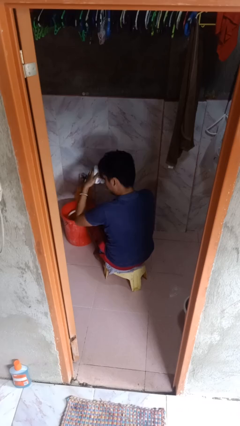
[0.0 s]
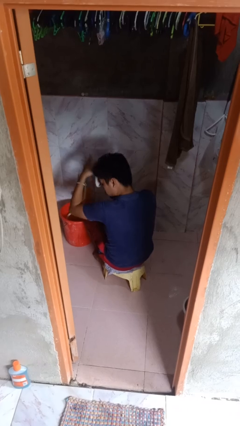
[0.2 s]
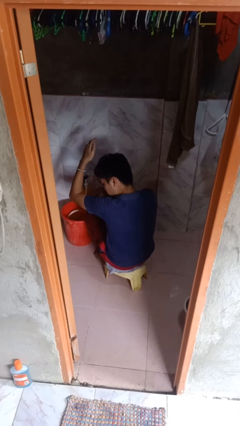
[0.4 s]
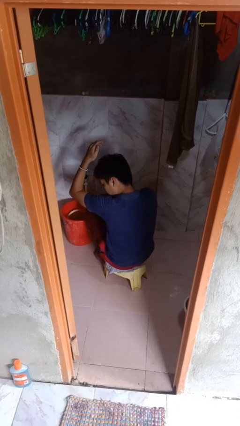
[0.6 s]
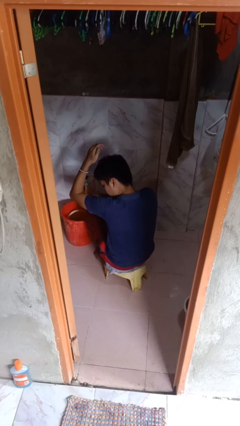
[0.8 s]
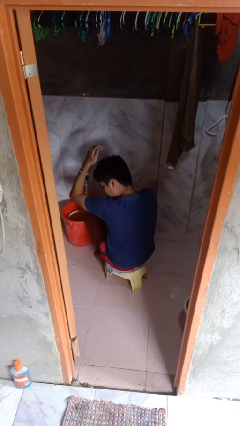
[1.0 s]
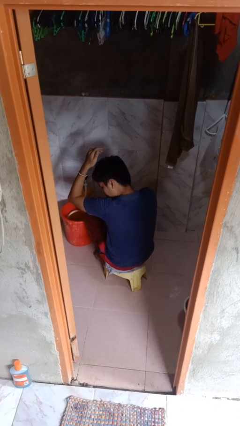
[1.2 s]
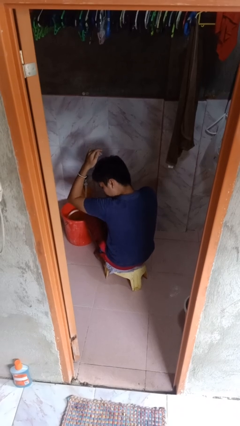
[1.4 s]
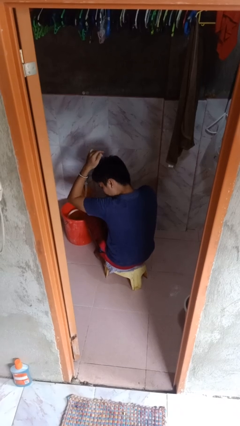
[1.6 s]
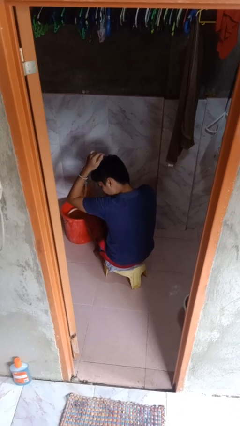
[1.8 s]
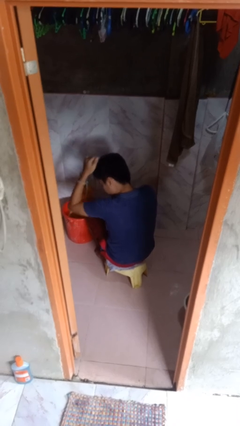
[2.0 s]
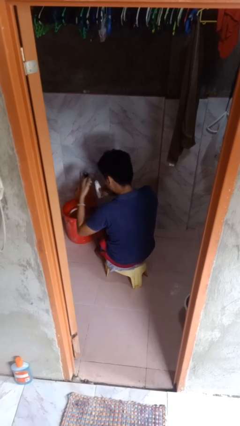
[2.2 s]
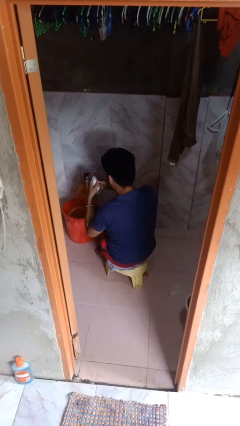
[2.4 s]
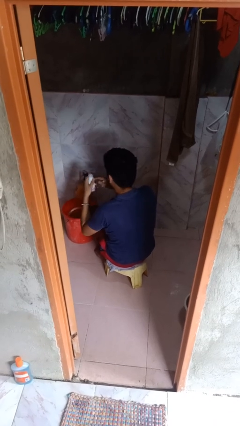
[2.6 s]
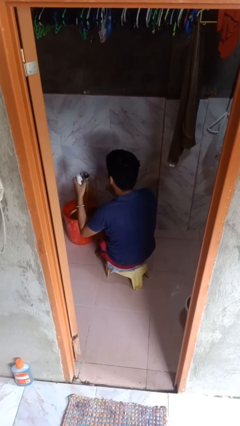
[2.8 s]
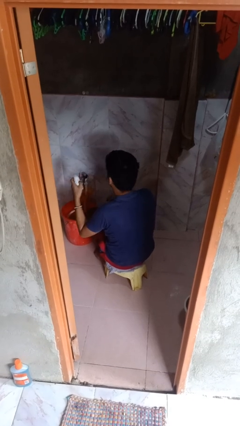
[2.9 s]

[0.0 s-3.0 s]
person applies deodorant

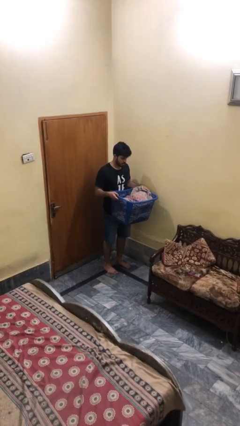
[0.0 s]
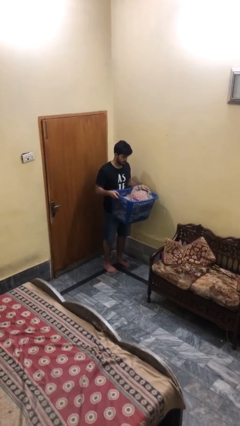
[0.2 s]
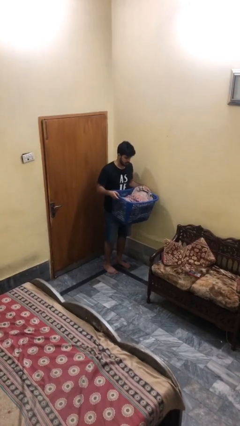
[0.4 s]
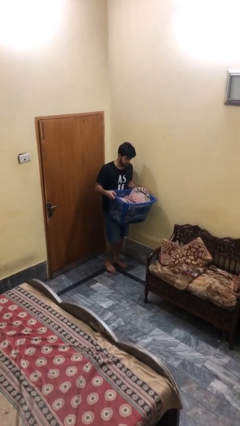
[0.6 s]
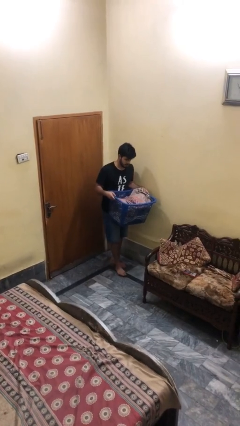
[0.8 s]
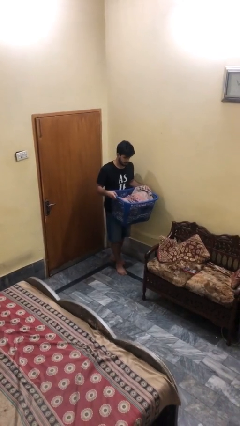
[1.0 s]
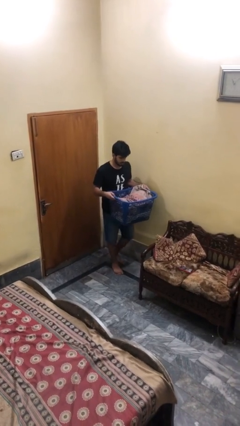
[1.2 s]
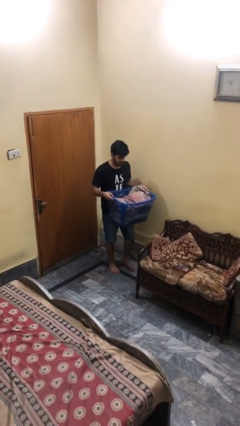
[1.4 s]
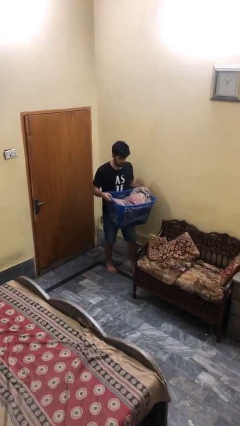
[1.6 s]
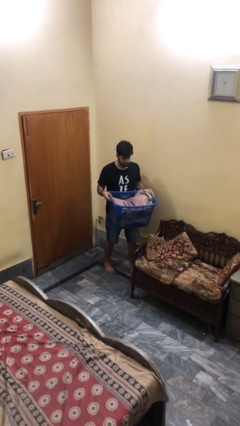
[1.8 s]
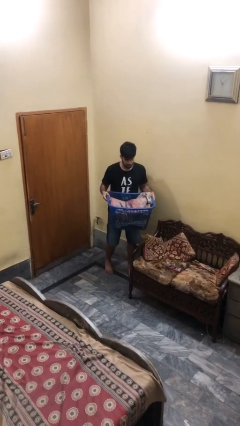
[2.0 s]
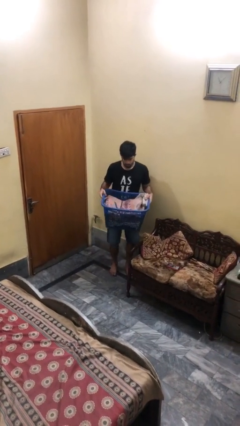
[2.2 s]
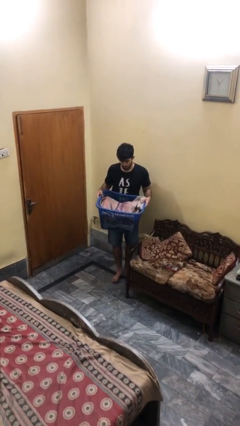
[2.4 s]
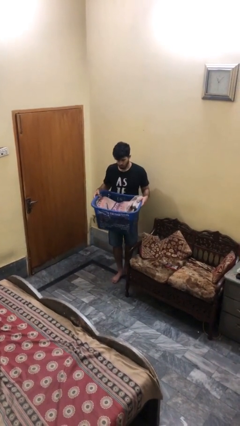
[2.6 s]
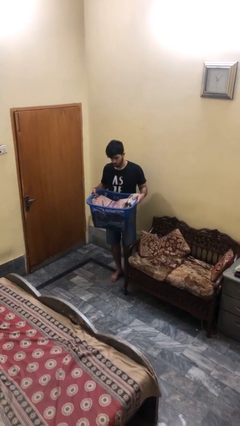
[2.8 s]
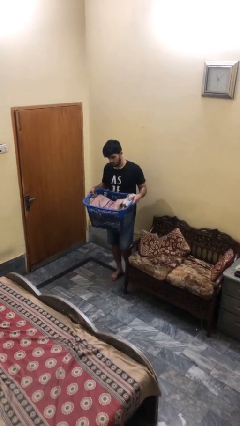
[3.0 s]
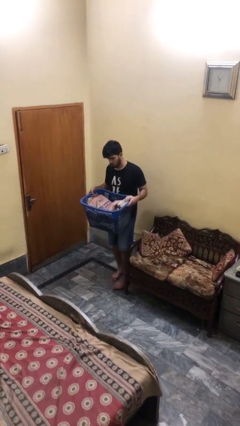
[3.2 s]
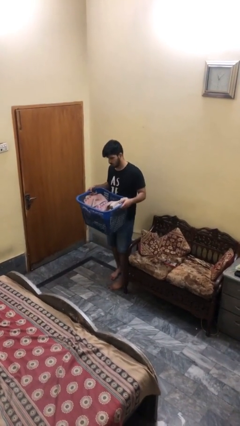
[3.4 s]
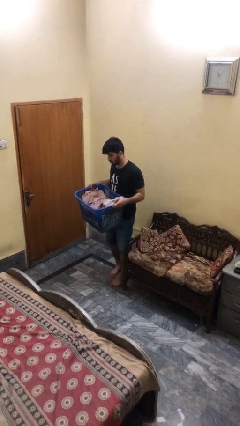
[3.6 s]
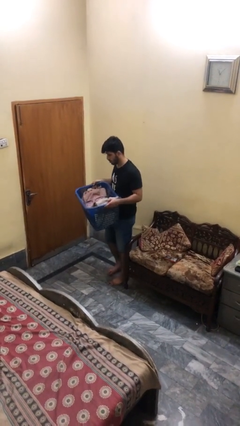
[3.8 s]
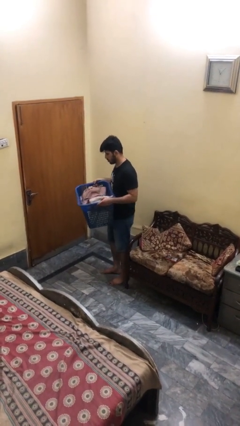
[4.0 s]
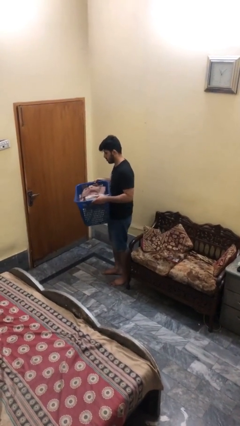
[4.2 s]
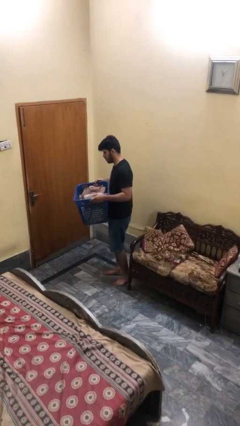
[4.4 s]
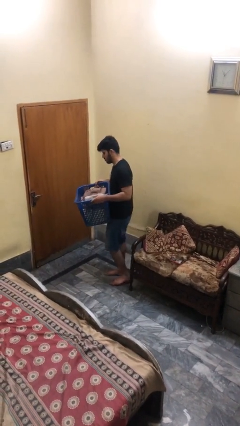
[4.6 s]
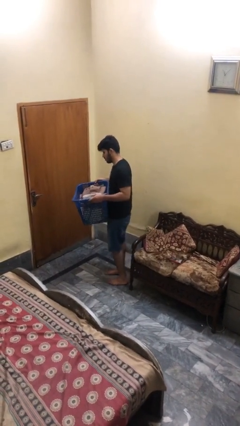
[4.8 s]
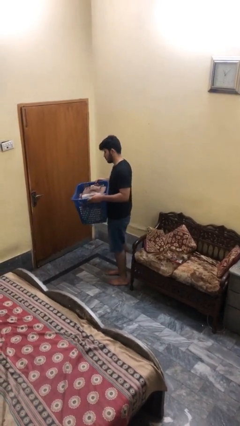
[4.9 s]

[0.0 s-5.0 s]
person carries laundry basket

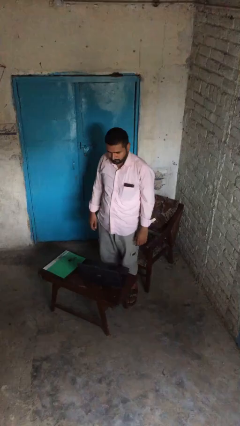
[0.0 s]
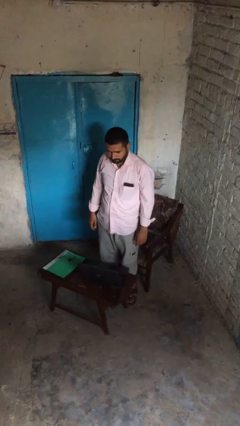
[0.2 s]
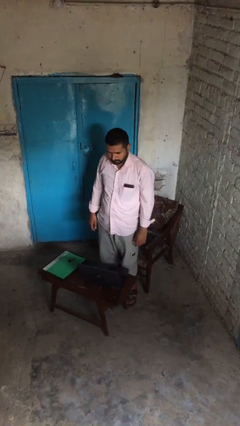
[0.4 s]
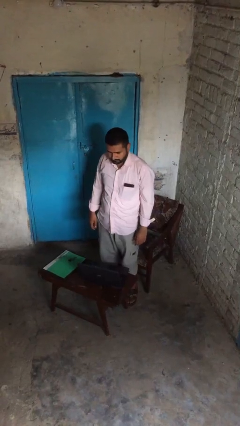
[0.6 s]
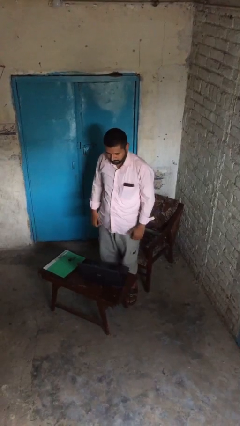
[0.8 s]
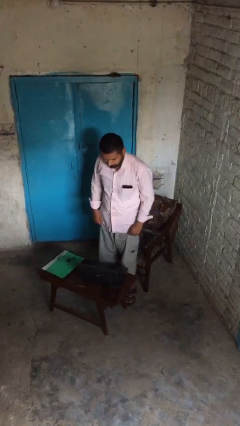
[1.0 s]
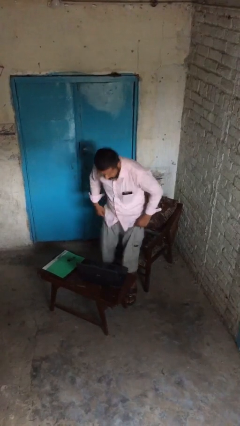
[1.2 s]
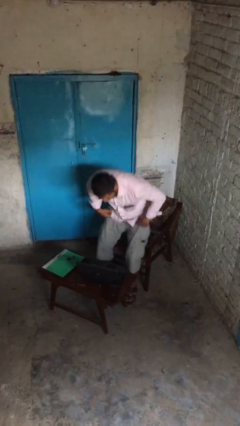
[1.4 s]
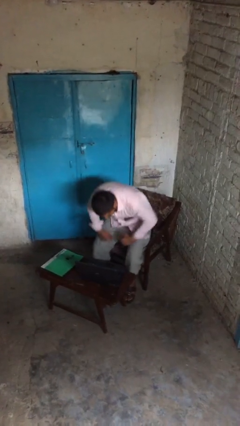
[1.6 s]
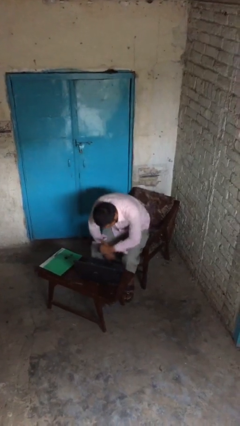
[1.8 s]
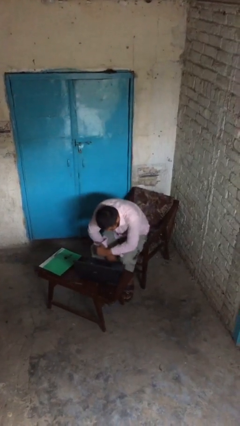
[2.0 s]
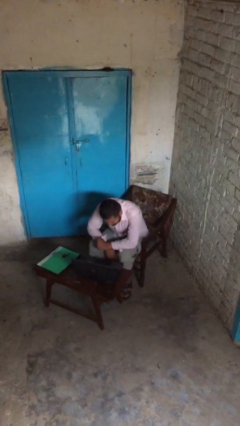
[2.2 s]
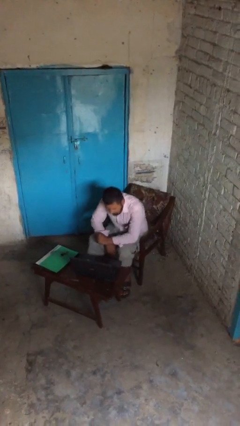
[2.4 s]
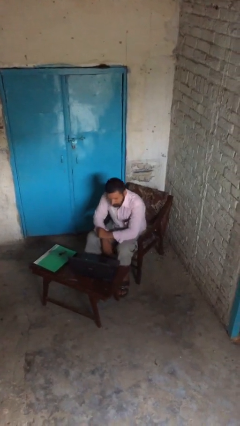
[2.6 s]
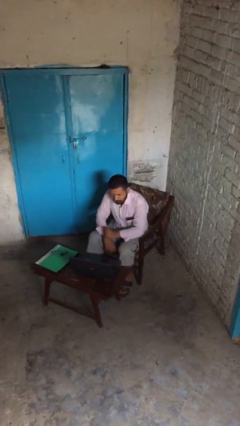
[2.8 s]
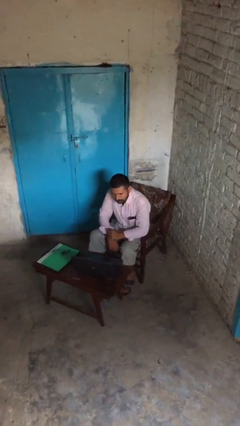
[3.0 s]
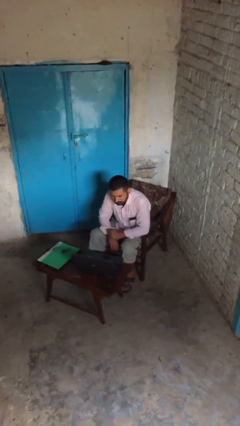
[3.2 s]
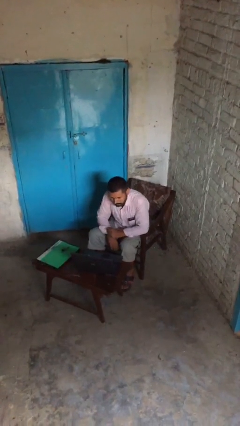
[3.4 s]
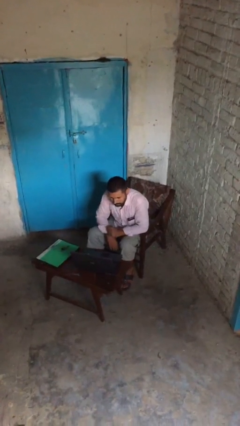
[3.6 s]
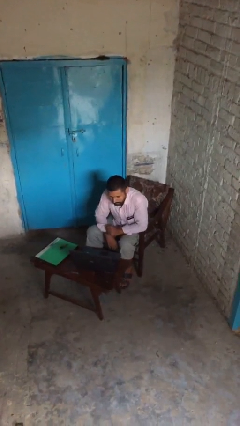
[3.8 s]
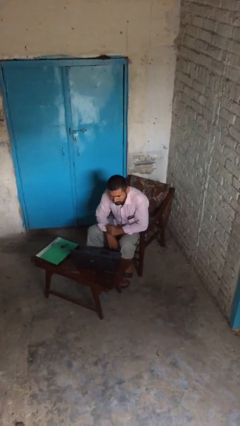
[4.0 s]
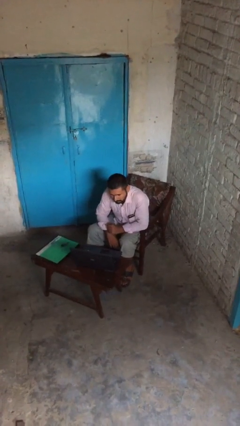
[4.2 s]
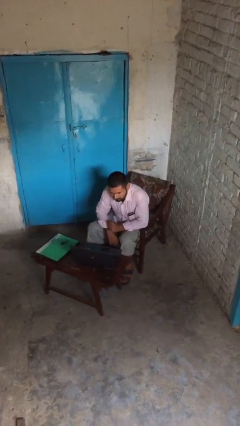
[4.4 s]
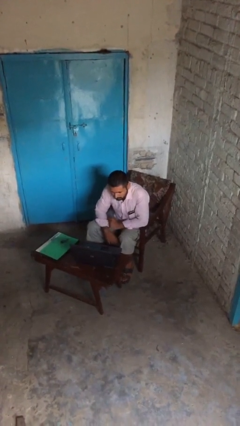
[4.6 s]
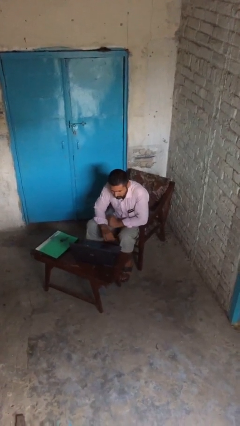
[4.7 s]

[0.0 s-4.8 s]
person sits down

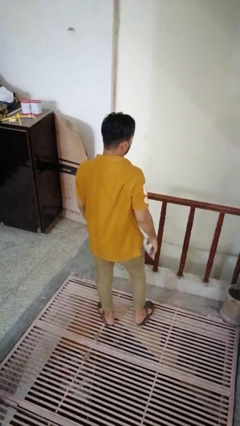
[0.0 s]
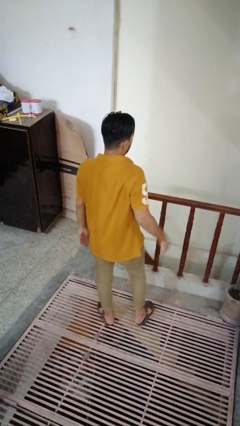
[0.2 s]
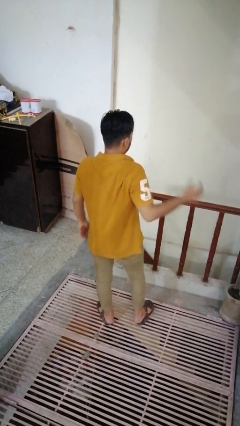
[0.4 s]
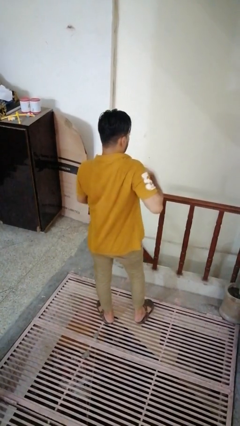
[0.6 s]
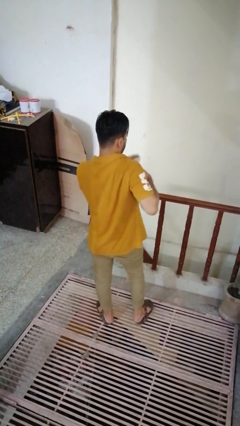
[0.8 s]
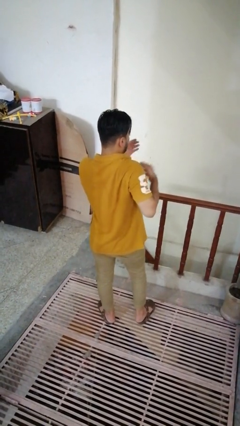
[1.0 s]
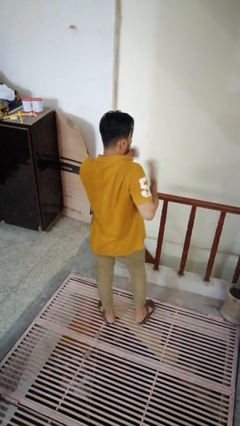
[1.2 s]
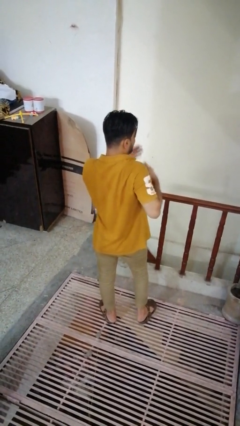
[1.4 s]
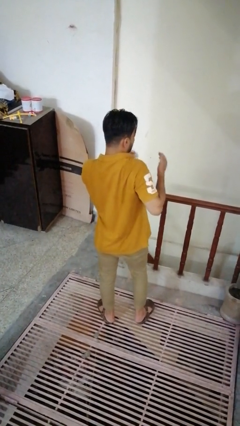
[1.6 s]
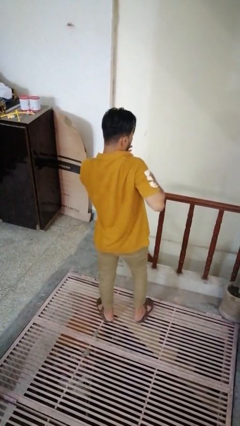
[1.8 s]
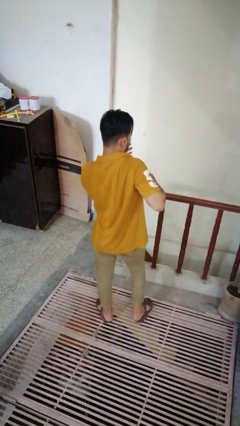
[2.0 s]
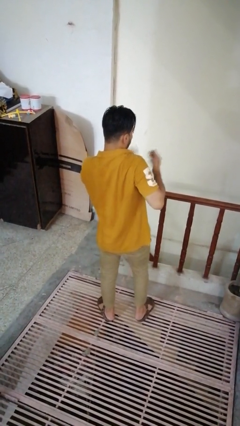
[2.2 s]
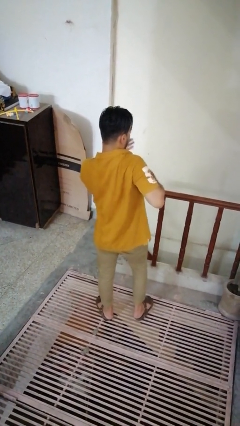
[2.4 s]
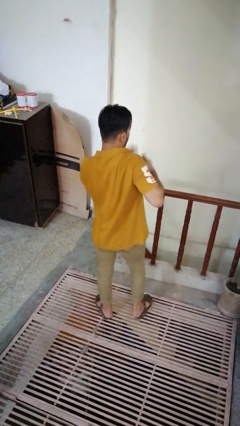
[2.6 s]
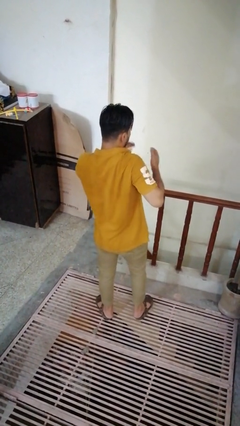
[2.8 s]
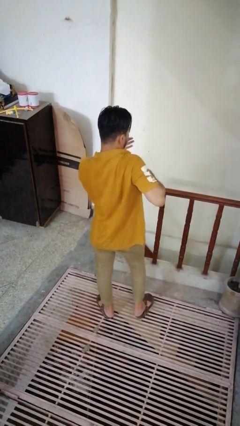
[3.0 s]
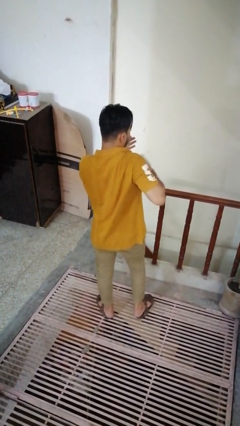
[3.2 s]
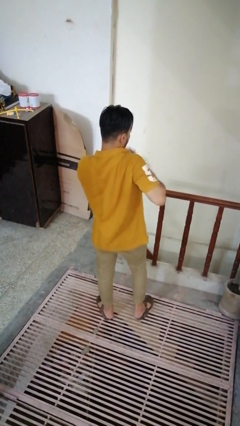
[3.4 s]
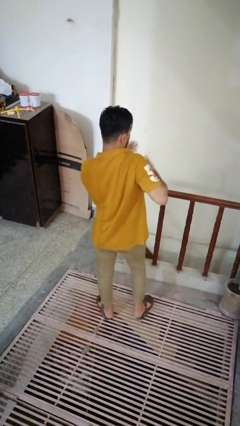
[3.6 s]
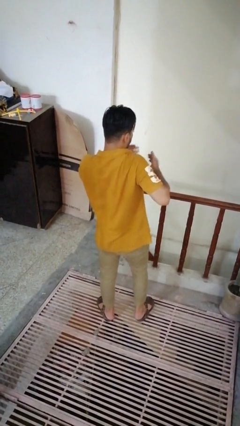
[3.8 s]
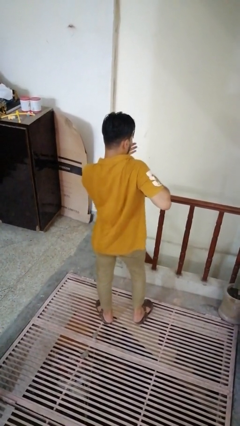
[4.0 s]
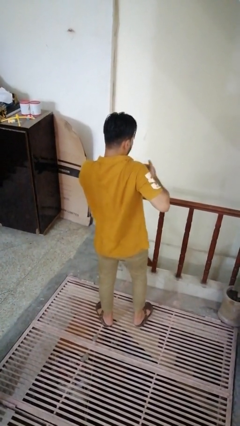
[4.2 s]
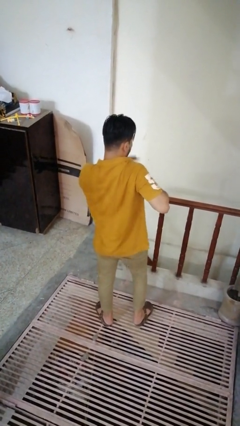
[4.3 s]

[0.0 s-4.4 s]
person drums on chest

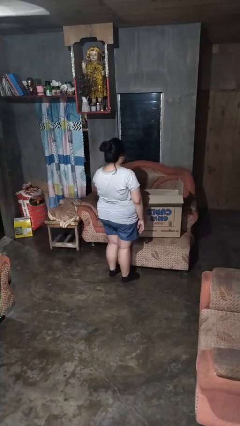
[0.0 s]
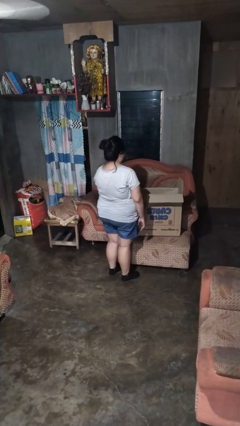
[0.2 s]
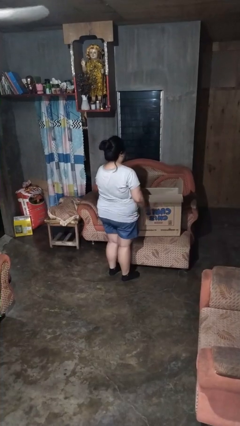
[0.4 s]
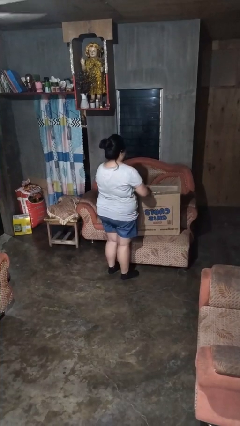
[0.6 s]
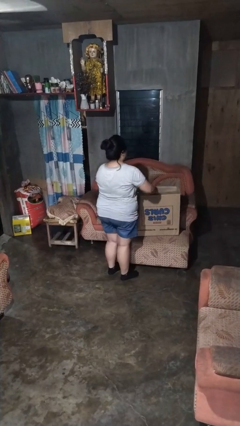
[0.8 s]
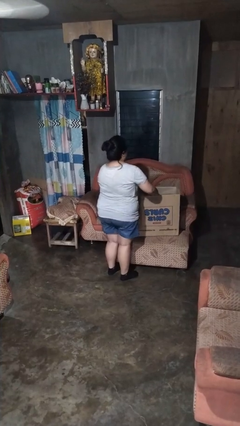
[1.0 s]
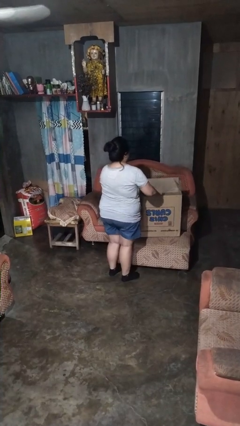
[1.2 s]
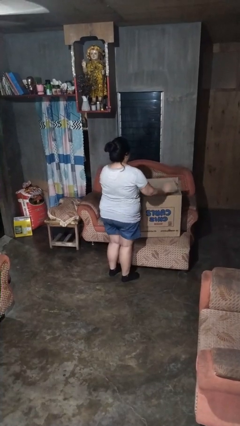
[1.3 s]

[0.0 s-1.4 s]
person closes box
